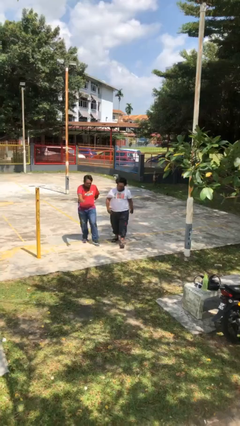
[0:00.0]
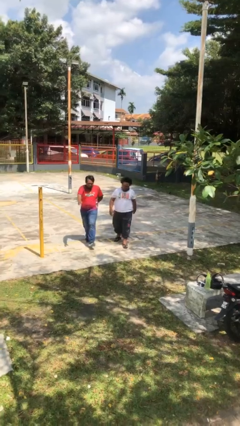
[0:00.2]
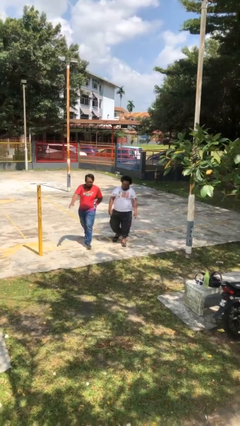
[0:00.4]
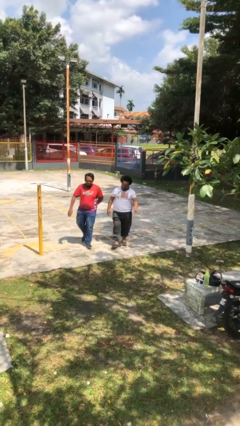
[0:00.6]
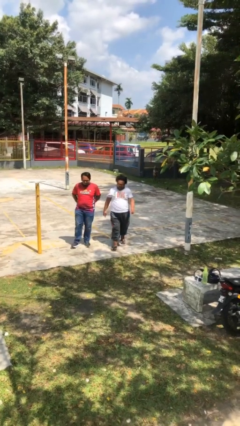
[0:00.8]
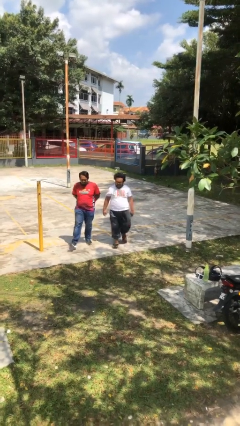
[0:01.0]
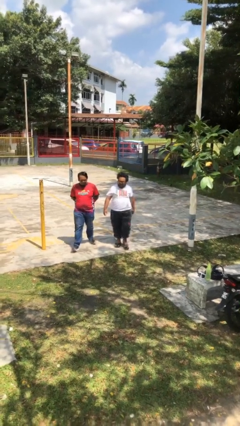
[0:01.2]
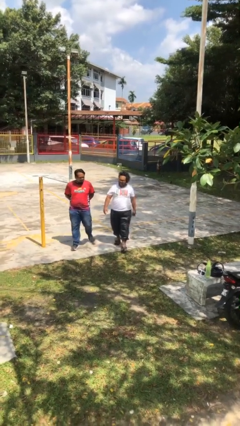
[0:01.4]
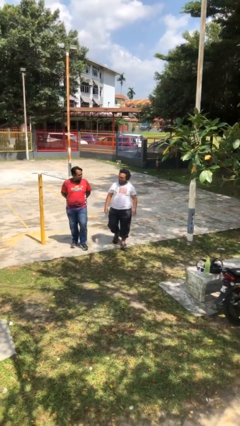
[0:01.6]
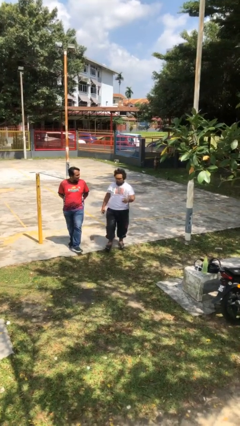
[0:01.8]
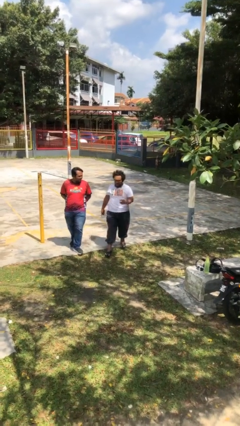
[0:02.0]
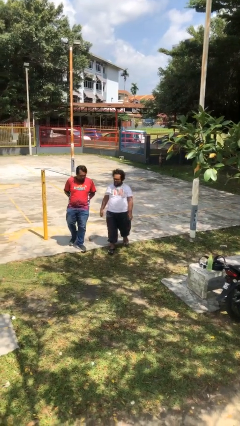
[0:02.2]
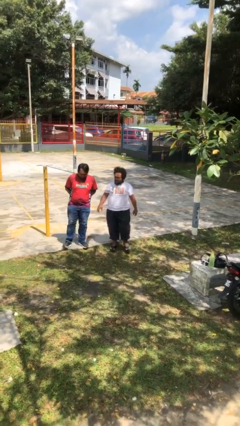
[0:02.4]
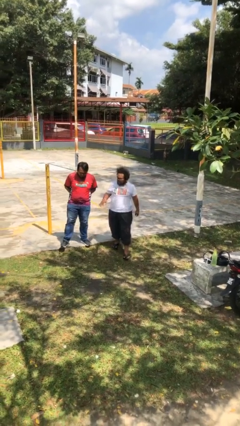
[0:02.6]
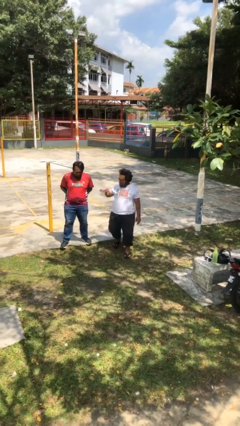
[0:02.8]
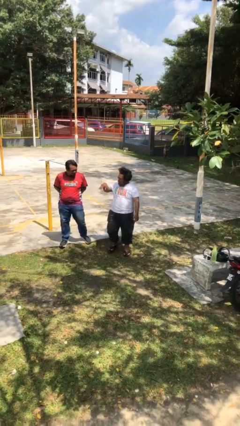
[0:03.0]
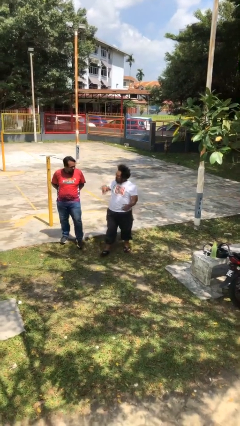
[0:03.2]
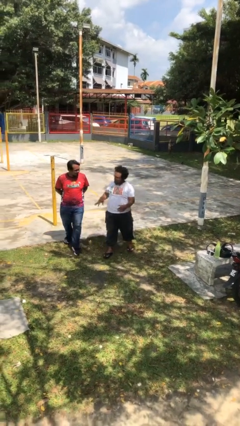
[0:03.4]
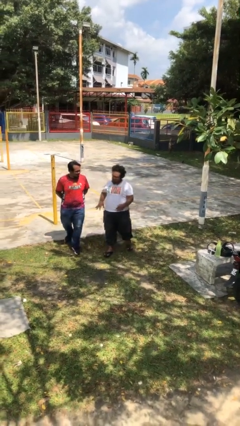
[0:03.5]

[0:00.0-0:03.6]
person talks to person

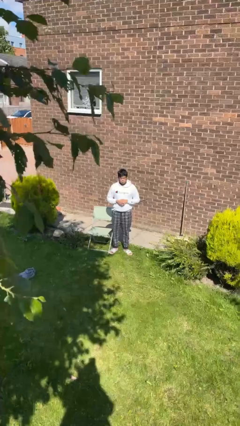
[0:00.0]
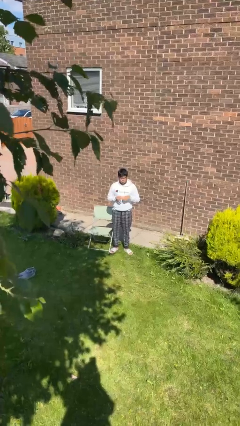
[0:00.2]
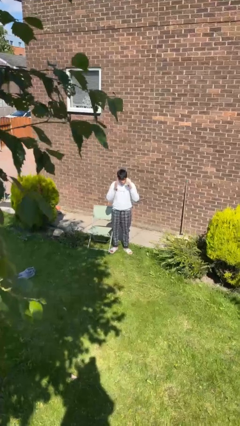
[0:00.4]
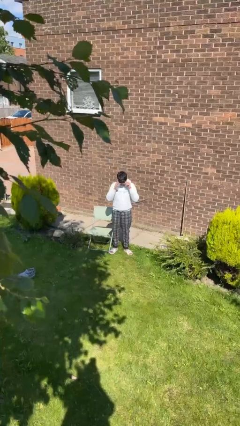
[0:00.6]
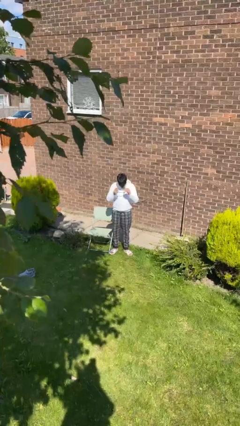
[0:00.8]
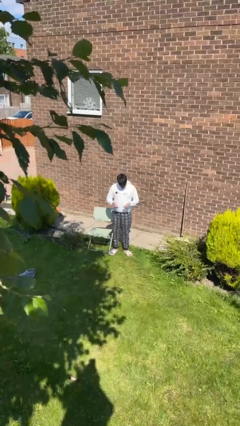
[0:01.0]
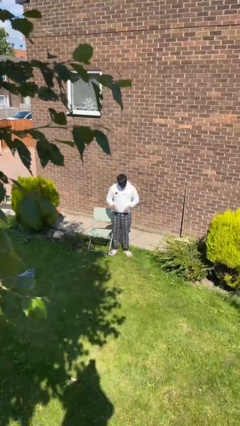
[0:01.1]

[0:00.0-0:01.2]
person takes off glasses

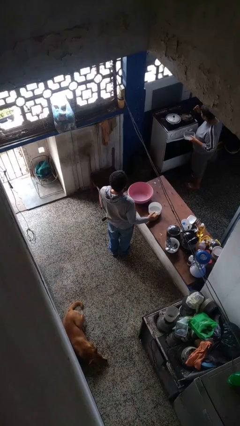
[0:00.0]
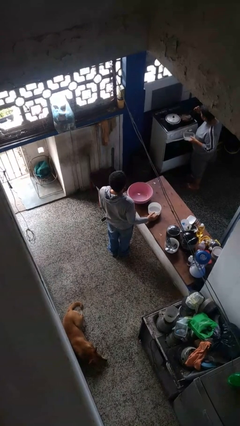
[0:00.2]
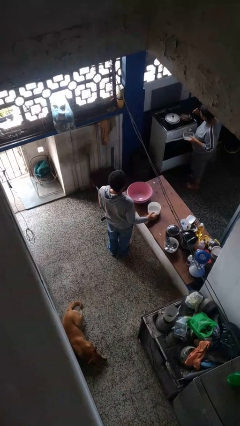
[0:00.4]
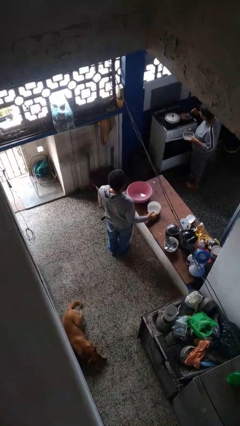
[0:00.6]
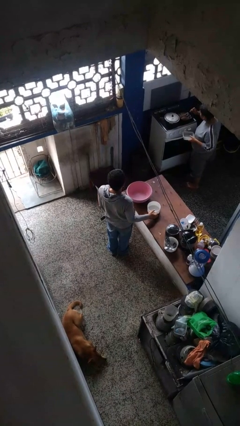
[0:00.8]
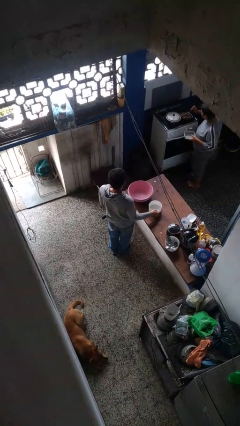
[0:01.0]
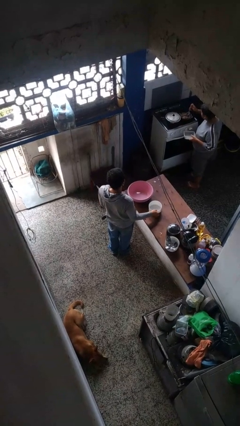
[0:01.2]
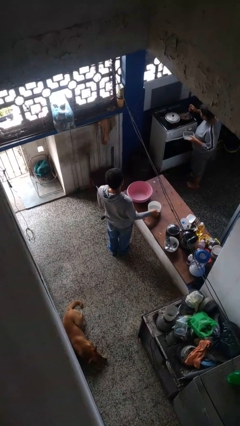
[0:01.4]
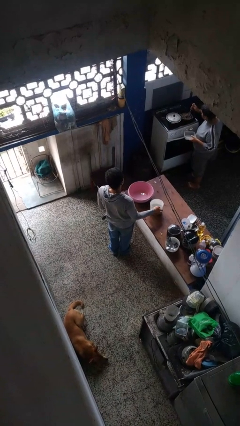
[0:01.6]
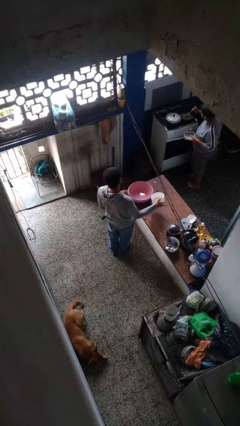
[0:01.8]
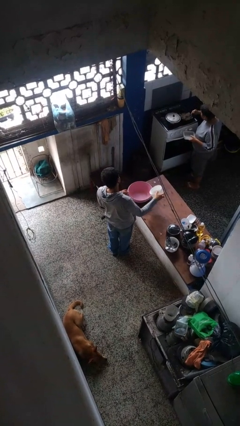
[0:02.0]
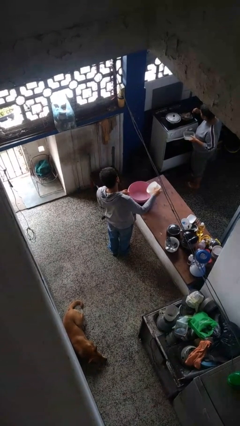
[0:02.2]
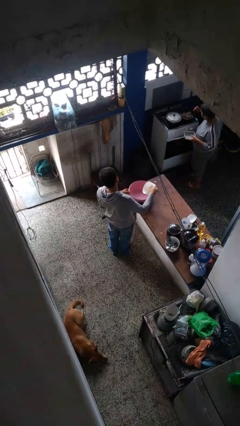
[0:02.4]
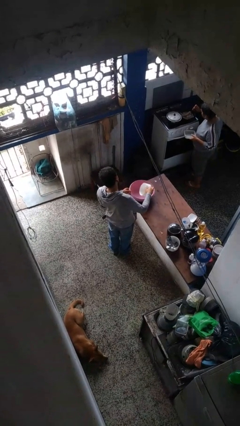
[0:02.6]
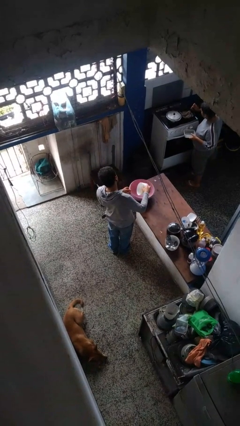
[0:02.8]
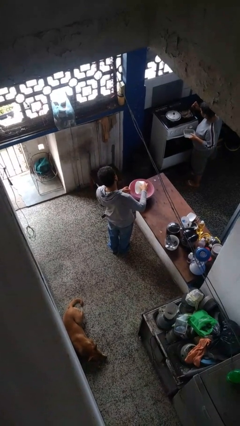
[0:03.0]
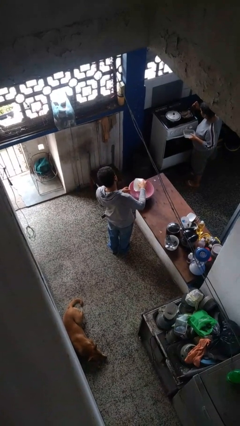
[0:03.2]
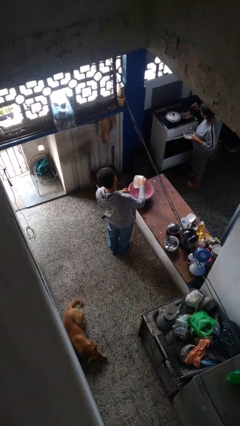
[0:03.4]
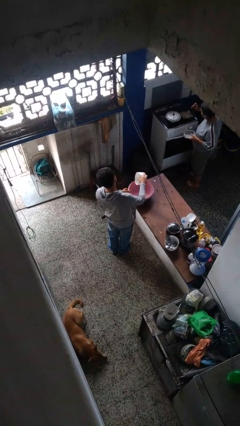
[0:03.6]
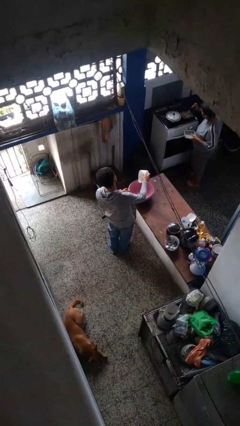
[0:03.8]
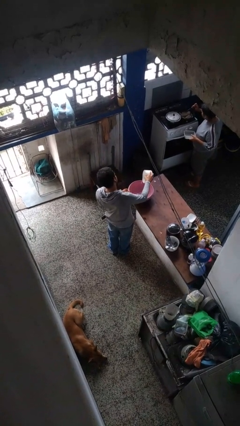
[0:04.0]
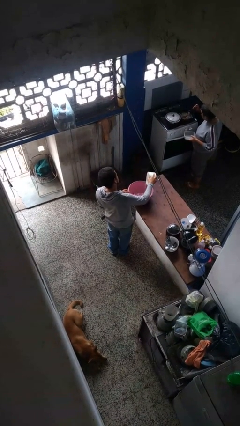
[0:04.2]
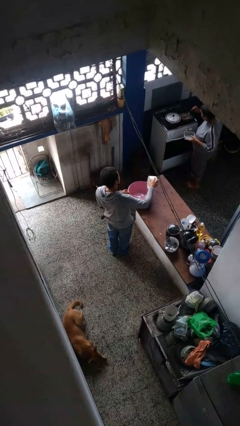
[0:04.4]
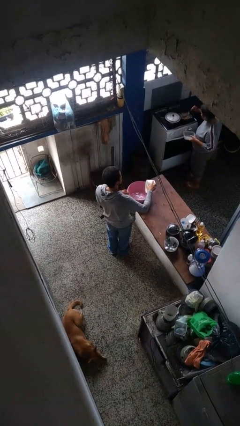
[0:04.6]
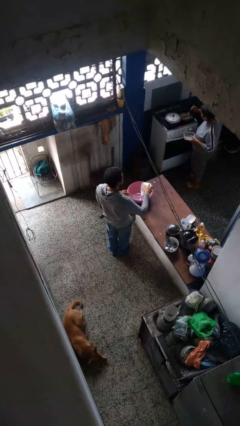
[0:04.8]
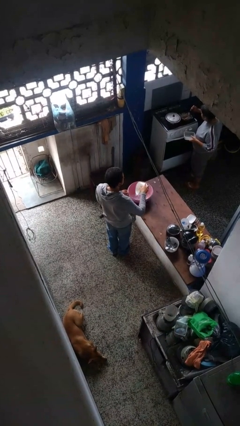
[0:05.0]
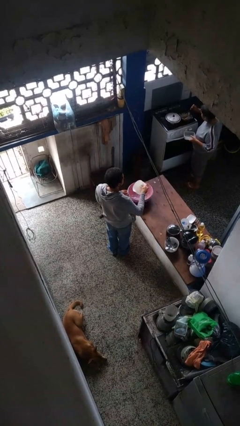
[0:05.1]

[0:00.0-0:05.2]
person pours into bowl

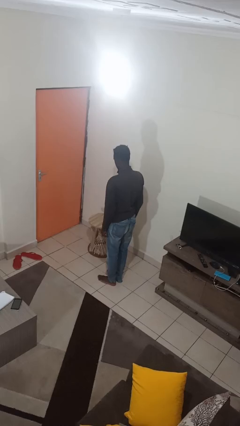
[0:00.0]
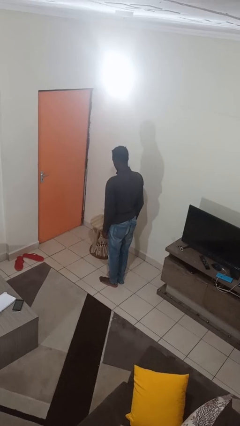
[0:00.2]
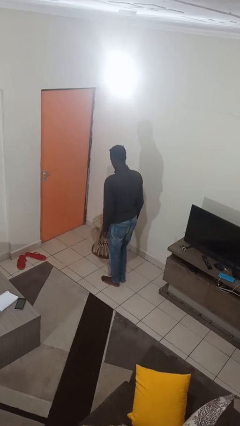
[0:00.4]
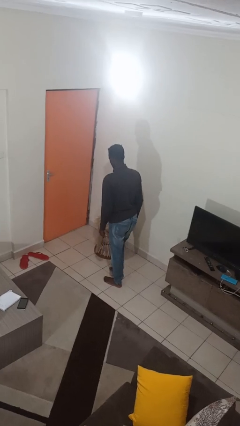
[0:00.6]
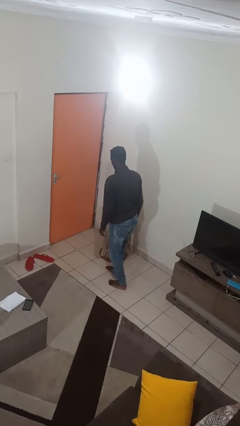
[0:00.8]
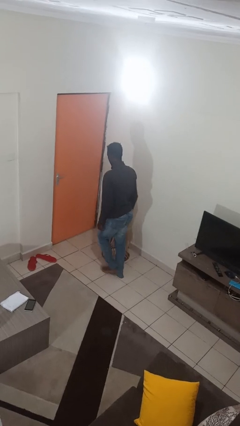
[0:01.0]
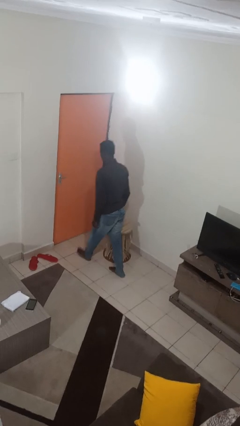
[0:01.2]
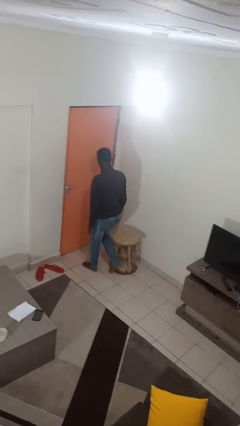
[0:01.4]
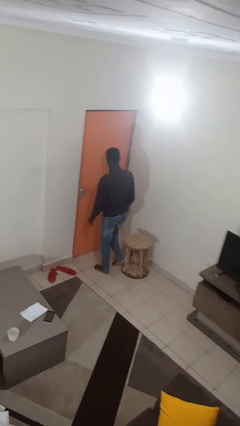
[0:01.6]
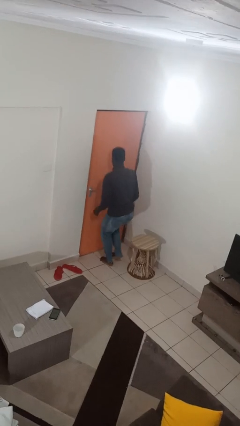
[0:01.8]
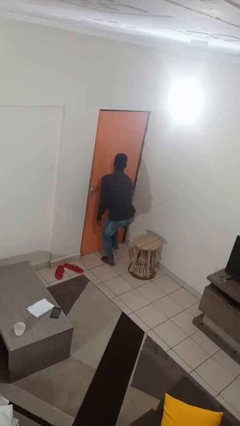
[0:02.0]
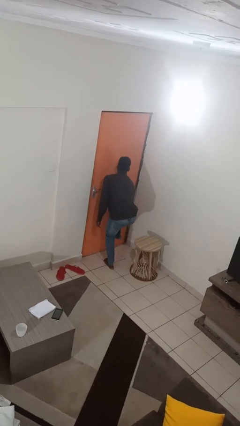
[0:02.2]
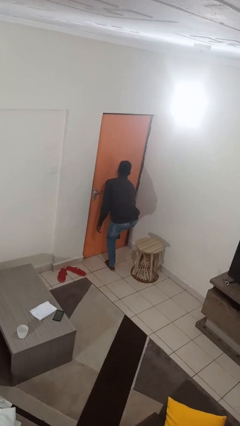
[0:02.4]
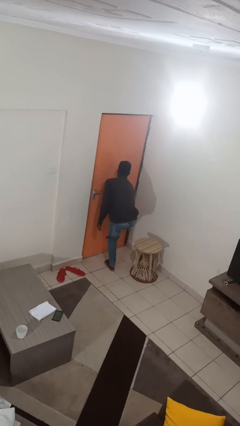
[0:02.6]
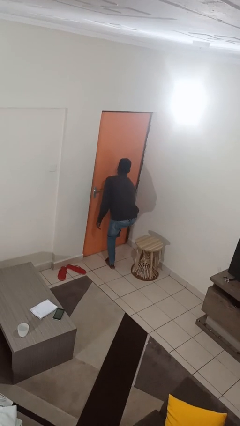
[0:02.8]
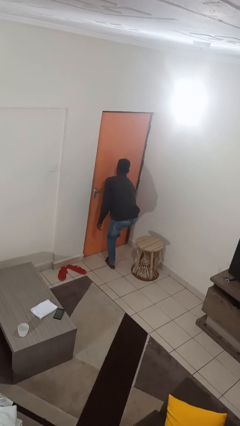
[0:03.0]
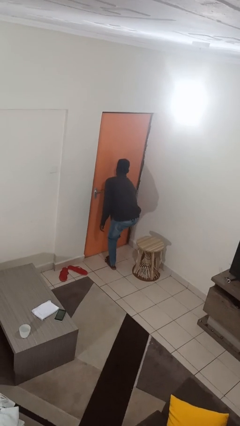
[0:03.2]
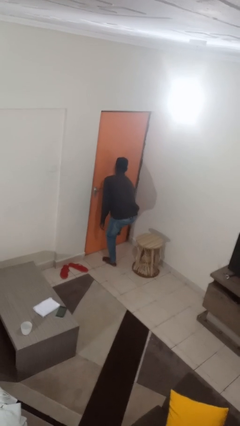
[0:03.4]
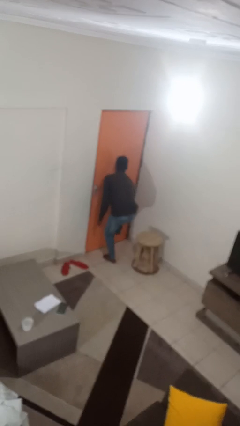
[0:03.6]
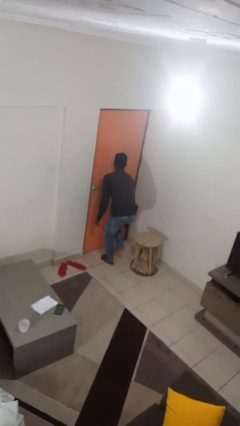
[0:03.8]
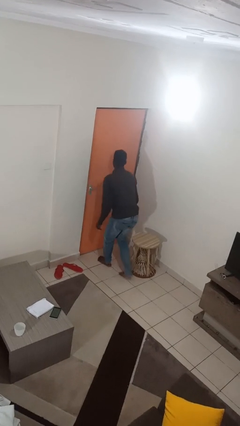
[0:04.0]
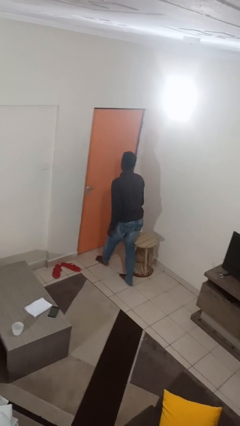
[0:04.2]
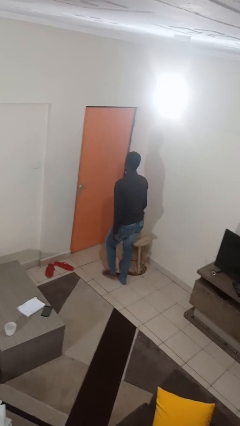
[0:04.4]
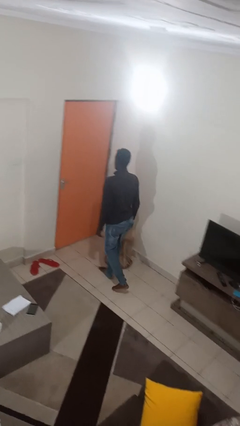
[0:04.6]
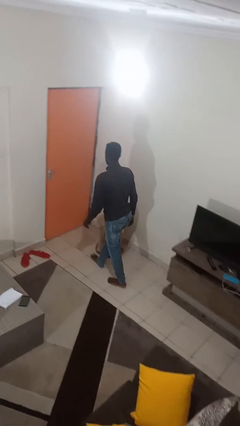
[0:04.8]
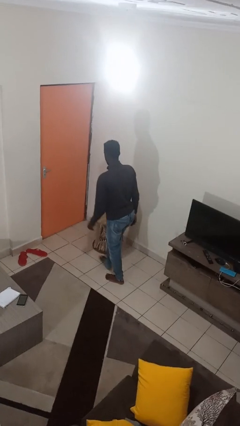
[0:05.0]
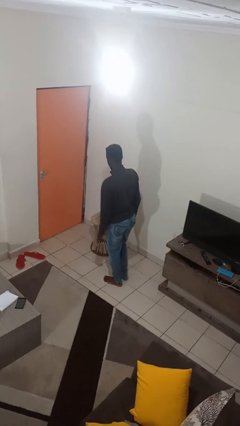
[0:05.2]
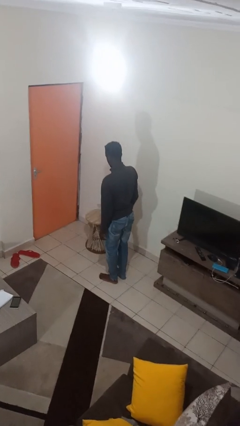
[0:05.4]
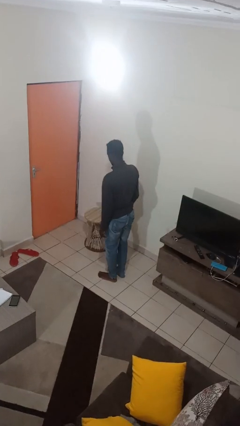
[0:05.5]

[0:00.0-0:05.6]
person stubs toe

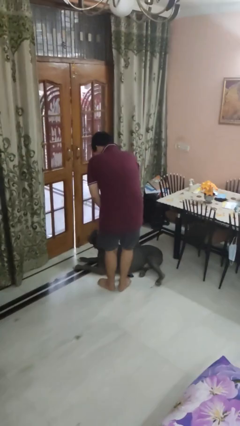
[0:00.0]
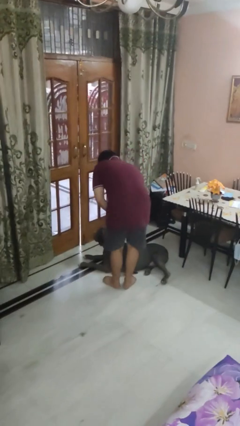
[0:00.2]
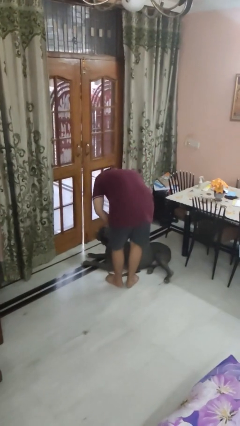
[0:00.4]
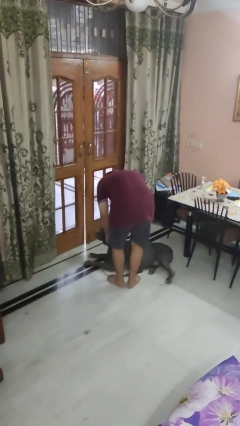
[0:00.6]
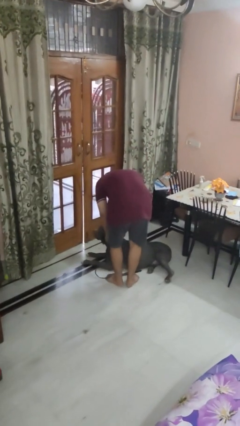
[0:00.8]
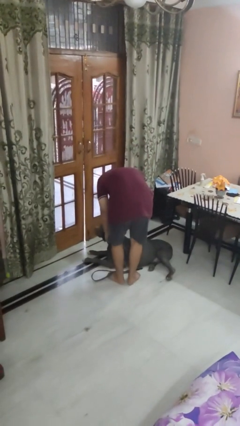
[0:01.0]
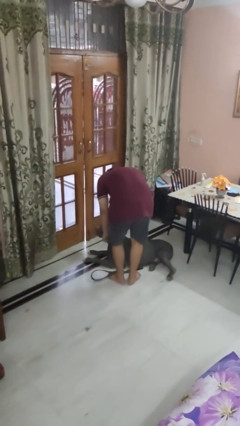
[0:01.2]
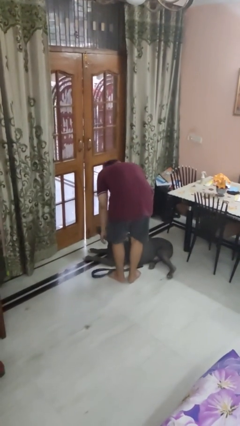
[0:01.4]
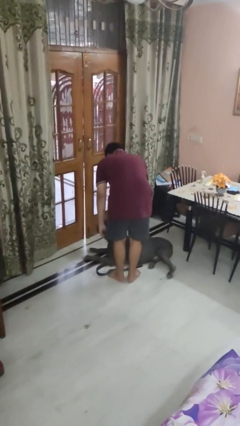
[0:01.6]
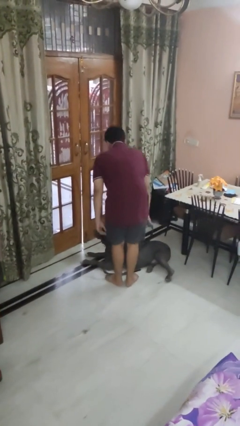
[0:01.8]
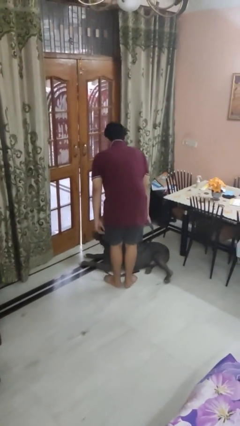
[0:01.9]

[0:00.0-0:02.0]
person unattaches leash from dog
